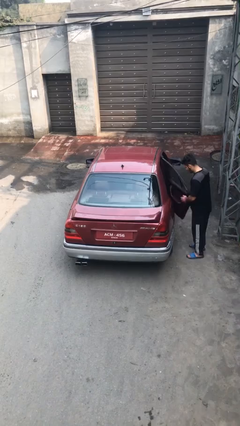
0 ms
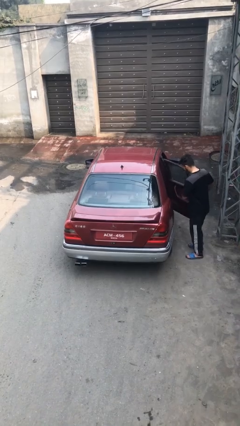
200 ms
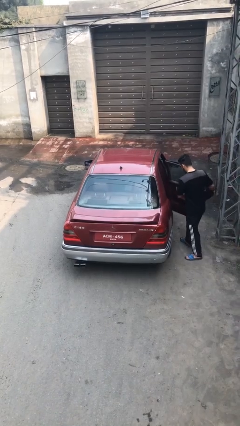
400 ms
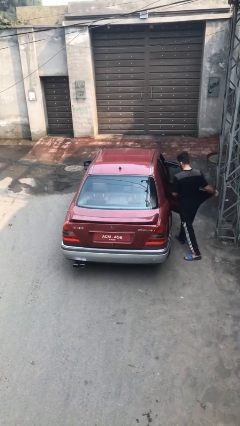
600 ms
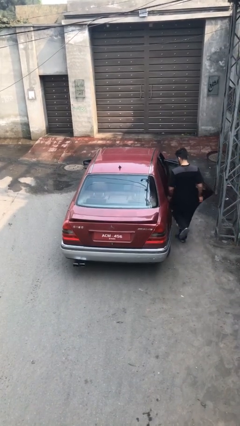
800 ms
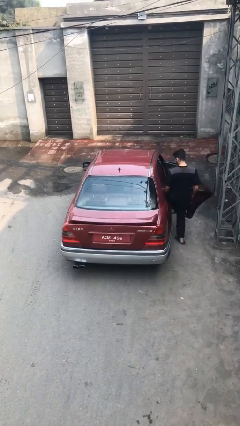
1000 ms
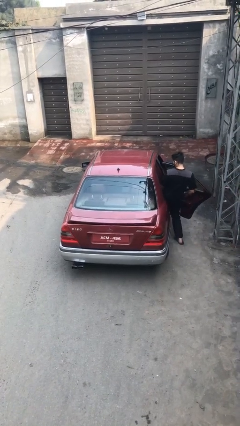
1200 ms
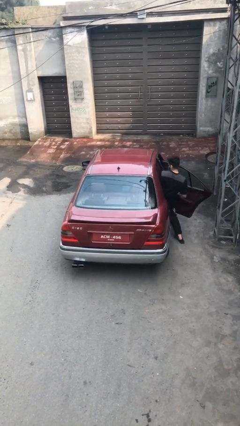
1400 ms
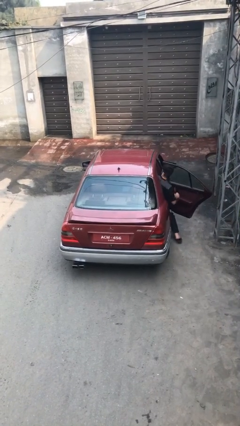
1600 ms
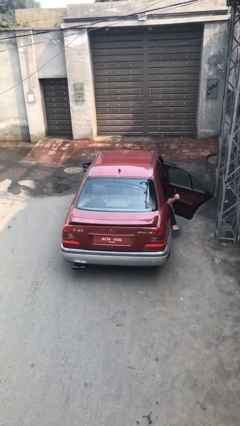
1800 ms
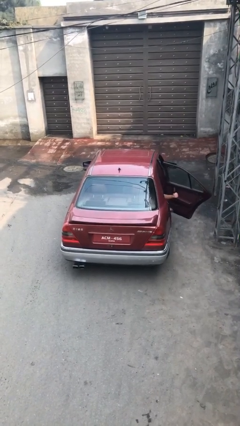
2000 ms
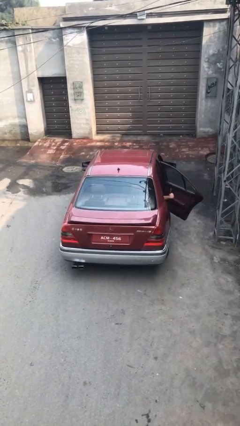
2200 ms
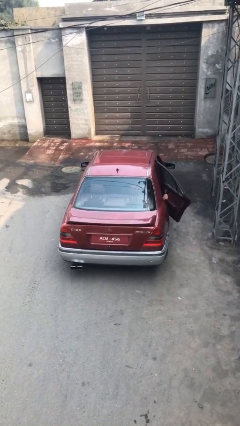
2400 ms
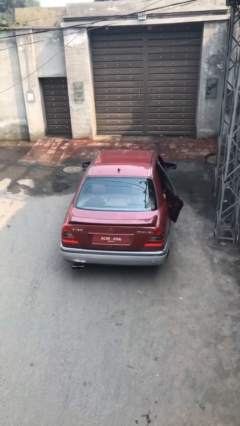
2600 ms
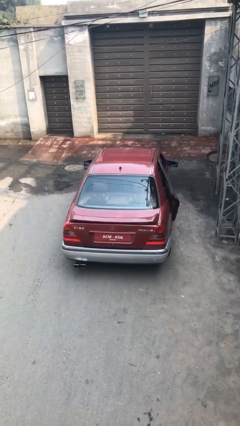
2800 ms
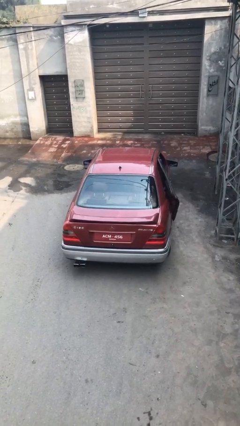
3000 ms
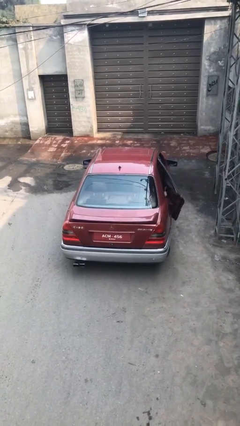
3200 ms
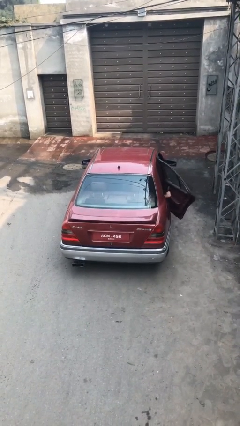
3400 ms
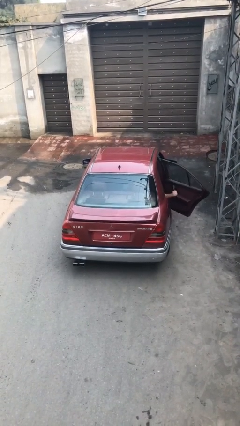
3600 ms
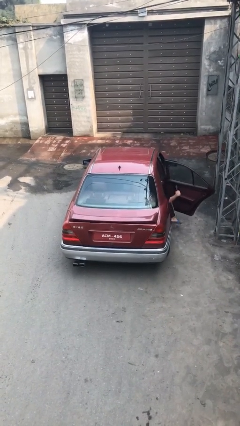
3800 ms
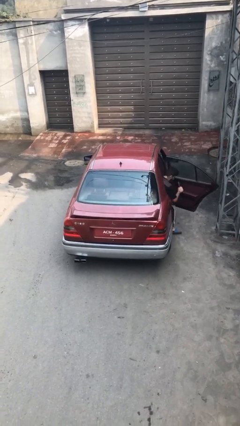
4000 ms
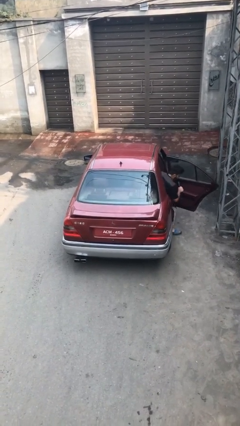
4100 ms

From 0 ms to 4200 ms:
car picks up person

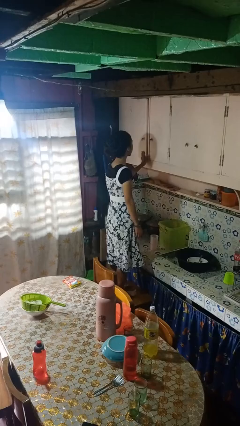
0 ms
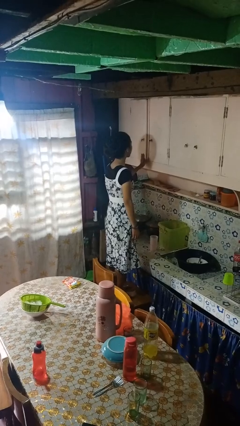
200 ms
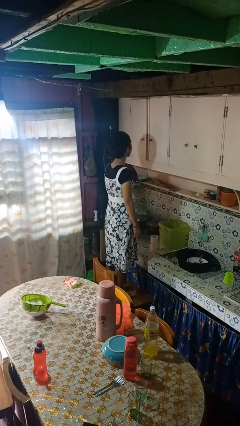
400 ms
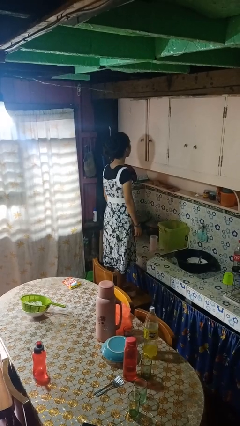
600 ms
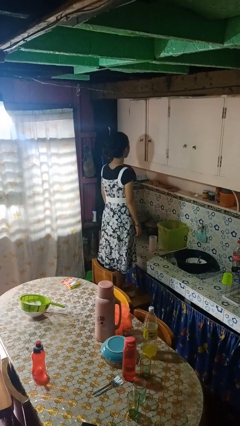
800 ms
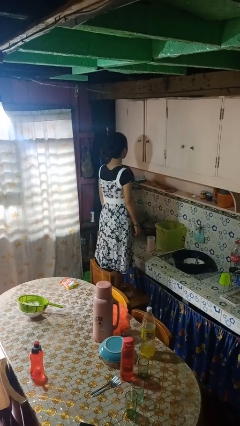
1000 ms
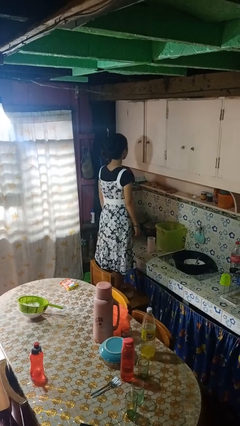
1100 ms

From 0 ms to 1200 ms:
person closes cabinet

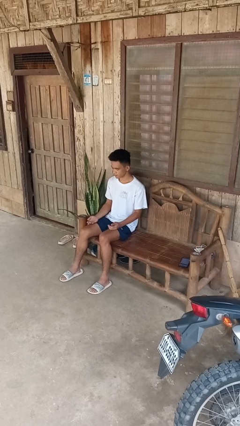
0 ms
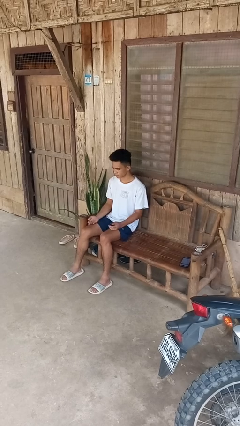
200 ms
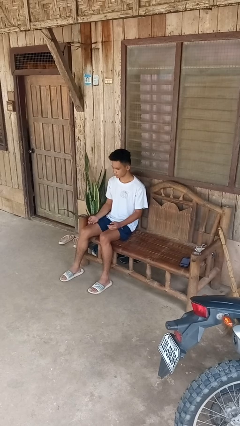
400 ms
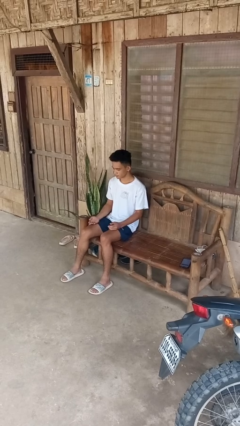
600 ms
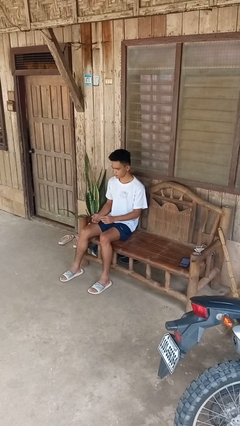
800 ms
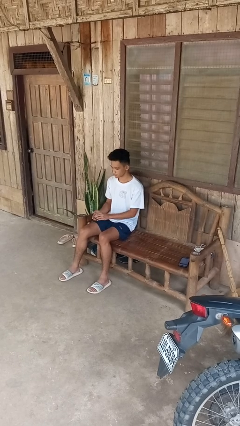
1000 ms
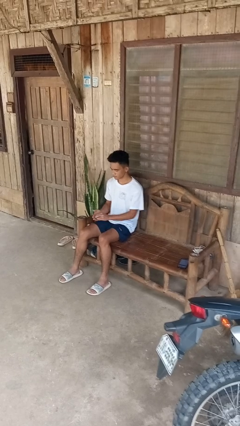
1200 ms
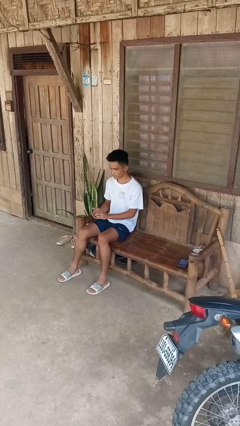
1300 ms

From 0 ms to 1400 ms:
person takes off ring

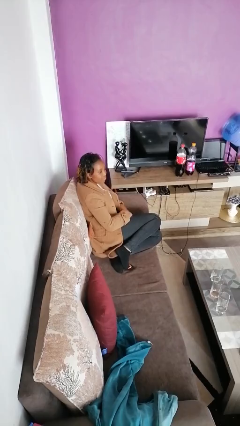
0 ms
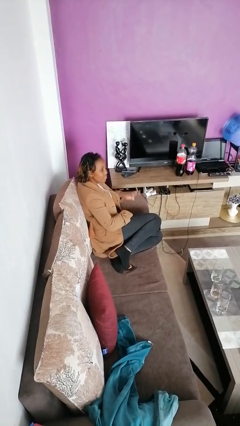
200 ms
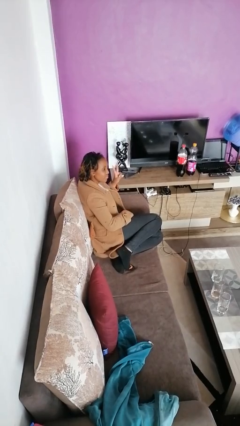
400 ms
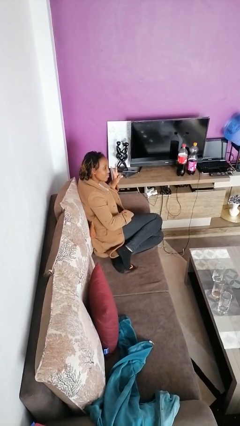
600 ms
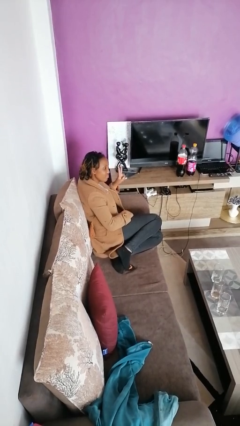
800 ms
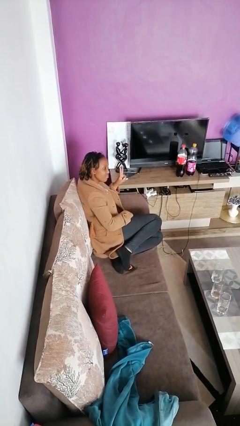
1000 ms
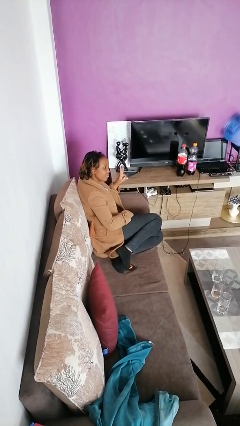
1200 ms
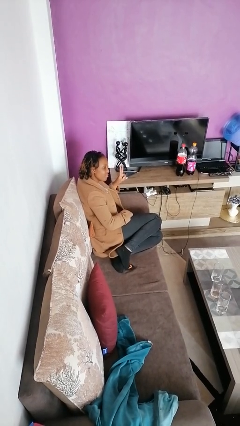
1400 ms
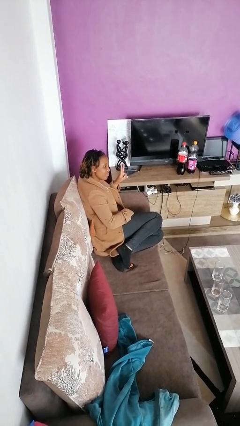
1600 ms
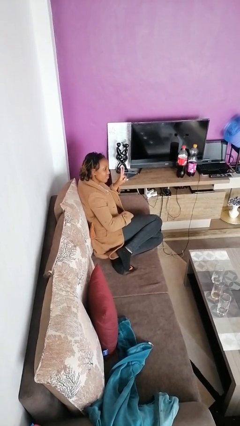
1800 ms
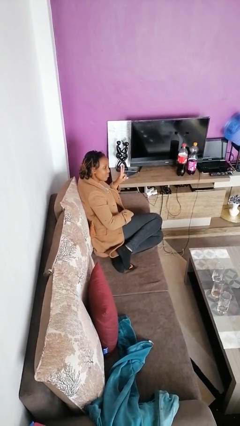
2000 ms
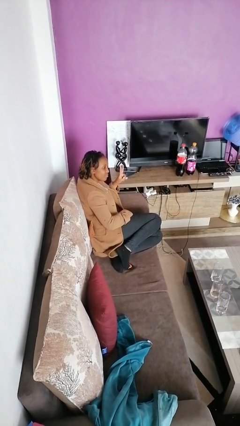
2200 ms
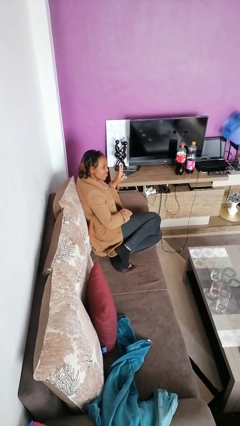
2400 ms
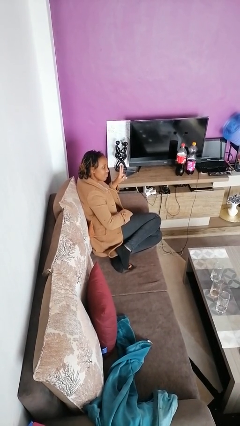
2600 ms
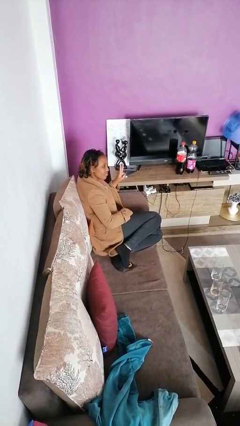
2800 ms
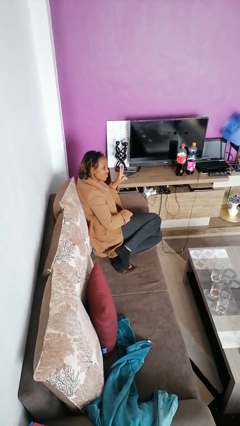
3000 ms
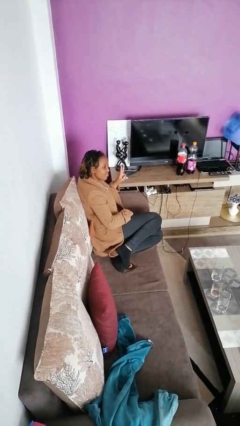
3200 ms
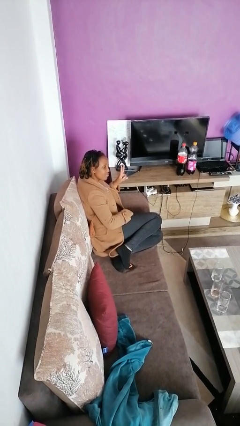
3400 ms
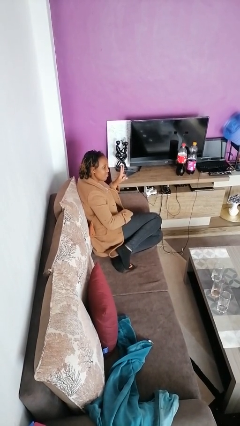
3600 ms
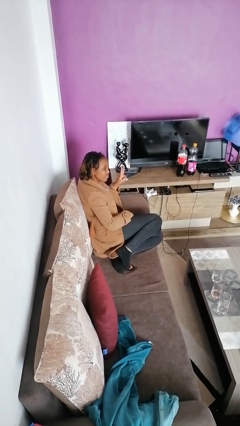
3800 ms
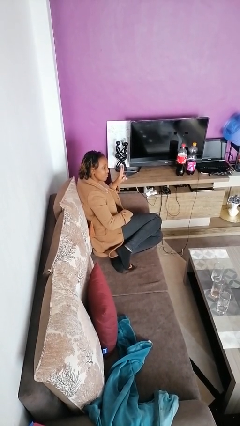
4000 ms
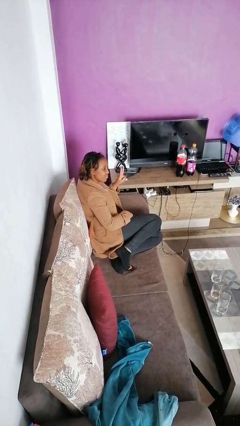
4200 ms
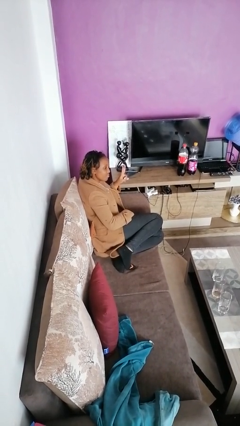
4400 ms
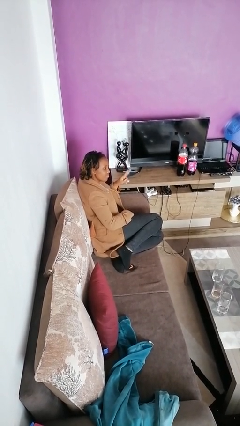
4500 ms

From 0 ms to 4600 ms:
person gestures peace

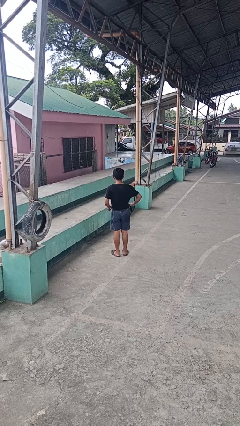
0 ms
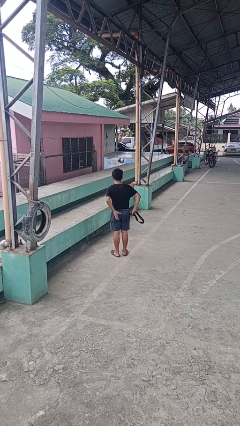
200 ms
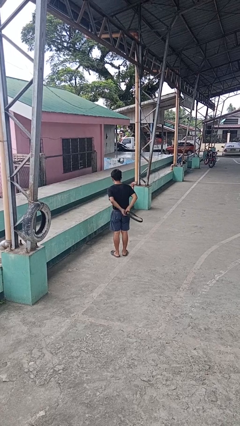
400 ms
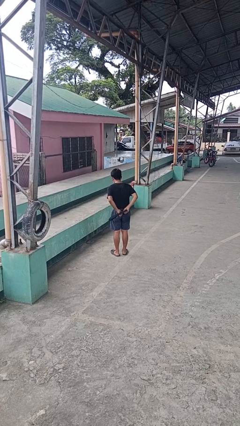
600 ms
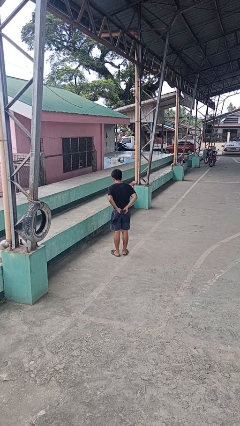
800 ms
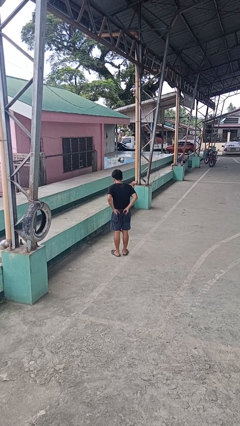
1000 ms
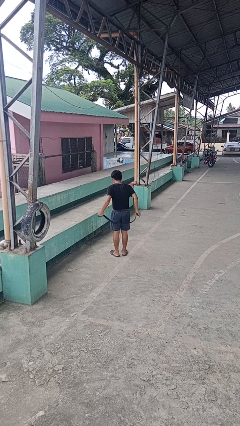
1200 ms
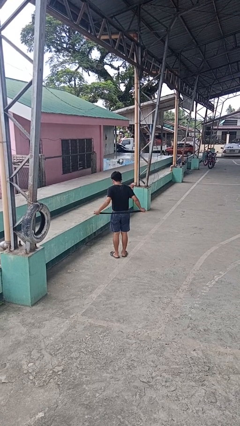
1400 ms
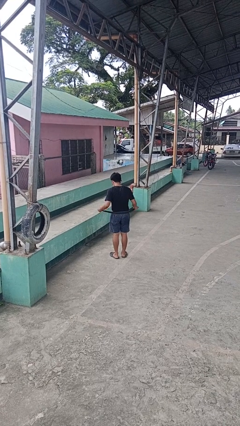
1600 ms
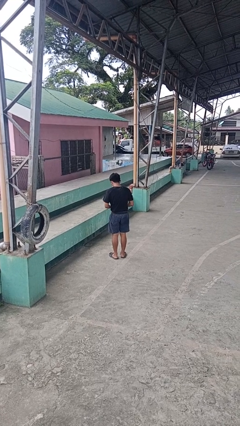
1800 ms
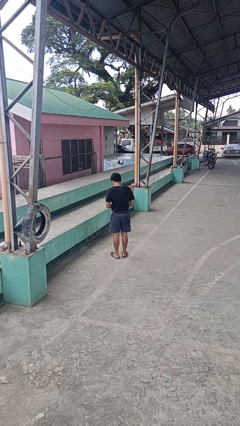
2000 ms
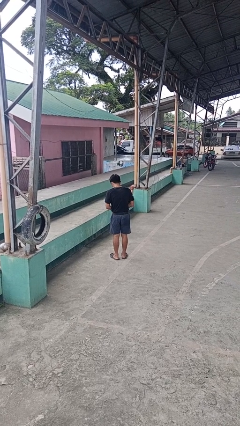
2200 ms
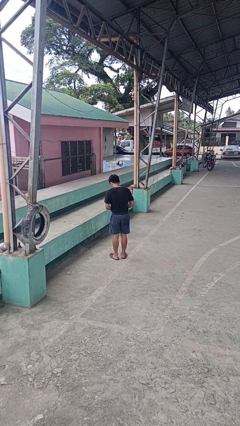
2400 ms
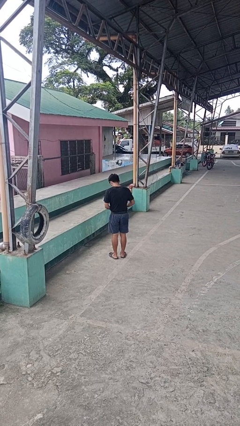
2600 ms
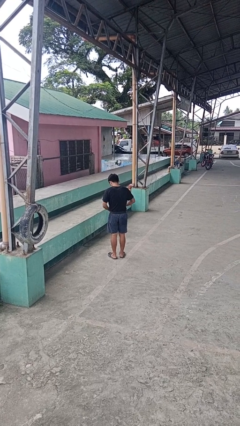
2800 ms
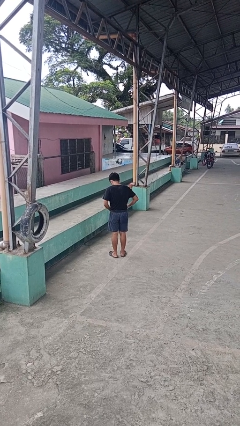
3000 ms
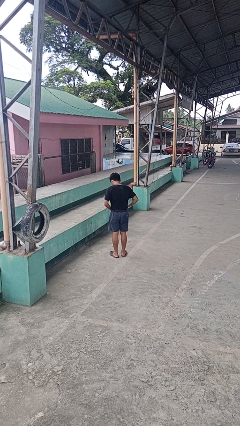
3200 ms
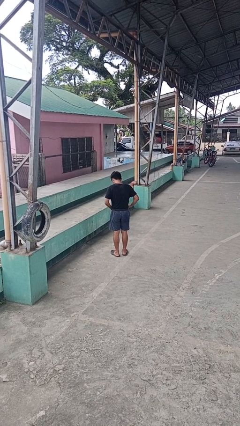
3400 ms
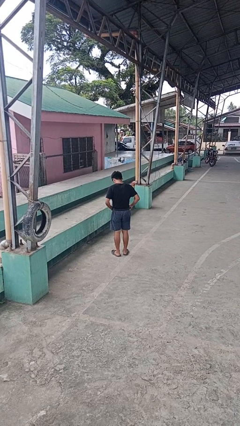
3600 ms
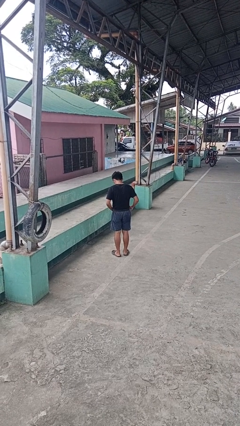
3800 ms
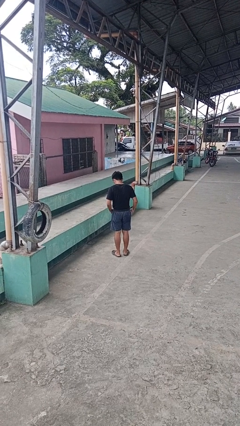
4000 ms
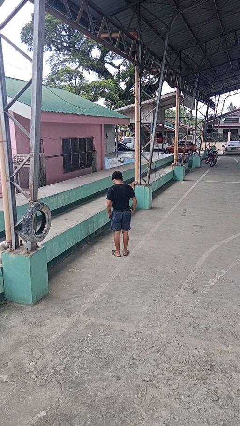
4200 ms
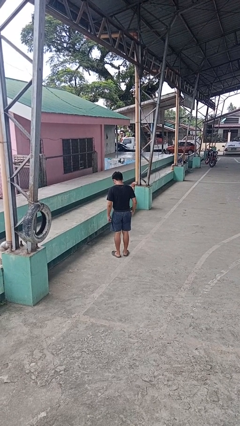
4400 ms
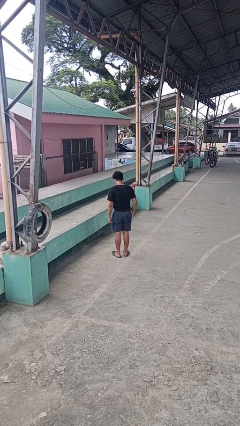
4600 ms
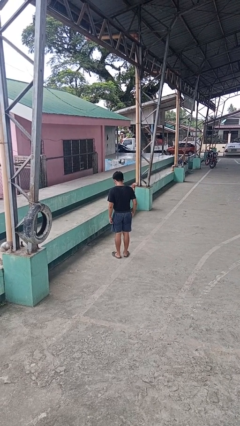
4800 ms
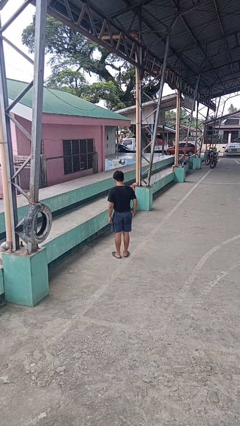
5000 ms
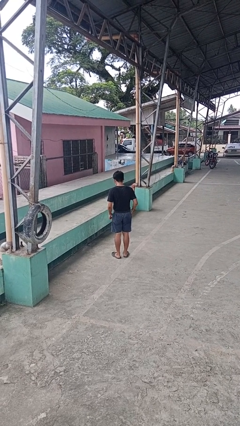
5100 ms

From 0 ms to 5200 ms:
person puts on belt

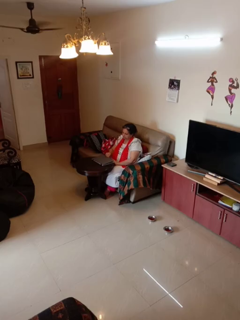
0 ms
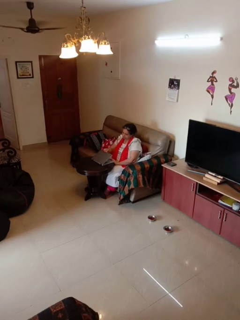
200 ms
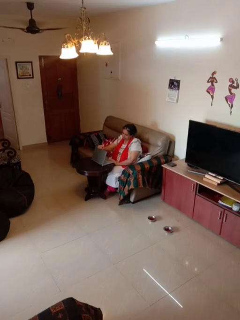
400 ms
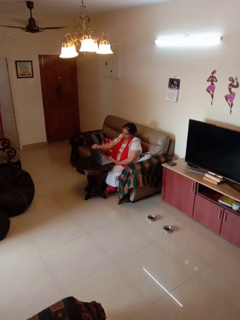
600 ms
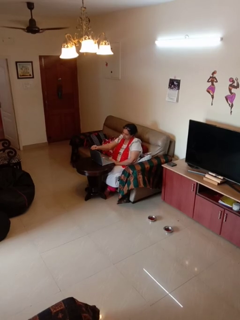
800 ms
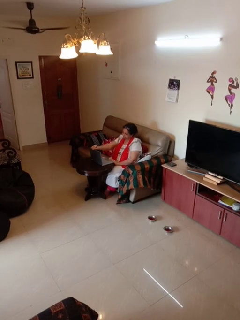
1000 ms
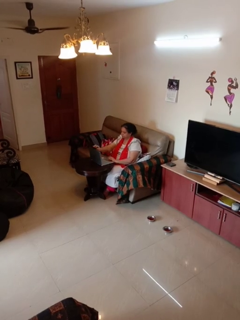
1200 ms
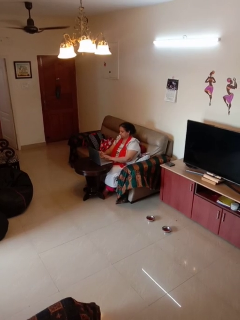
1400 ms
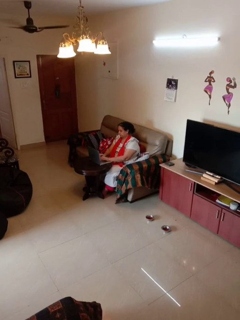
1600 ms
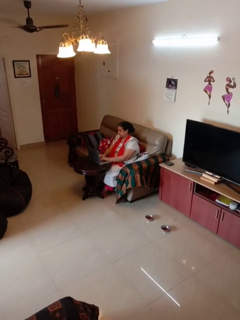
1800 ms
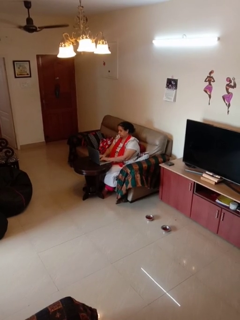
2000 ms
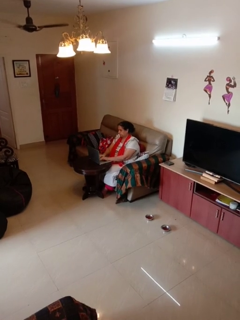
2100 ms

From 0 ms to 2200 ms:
person opens laptop
